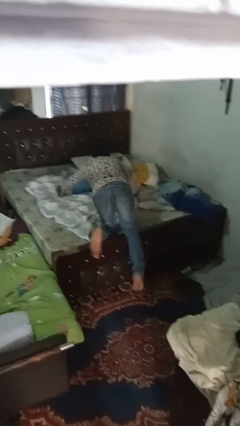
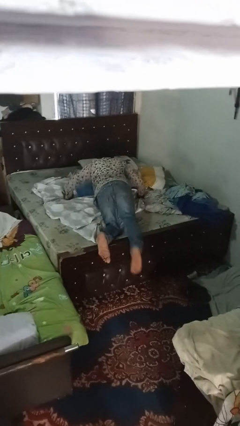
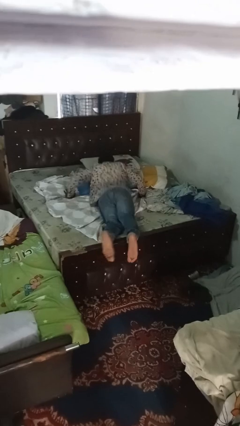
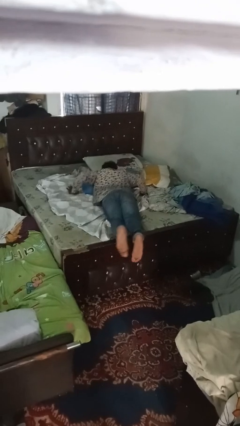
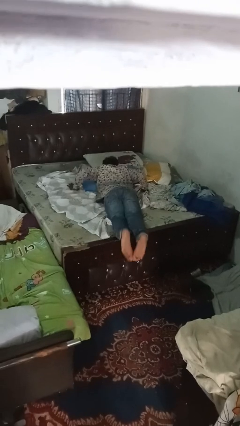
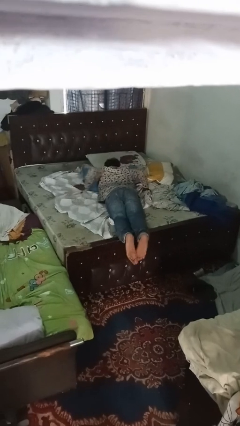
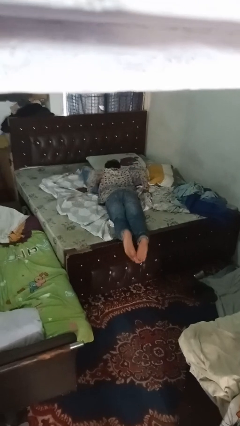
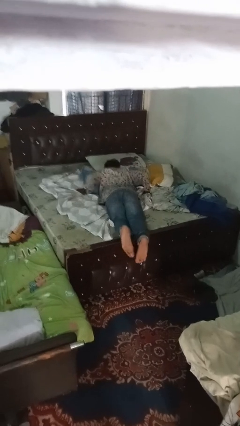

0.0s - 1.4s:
person lies down on bed

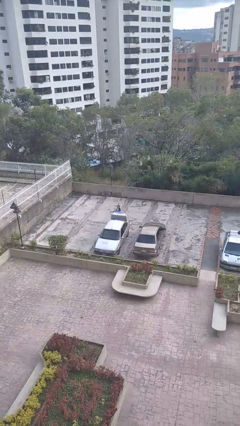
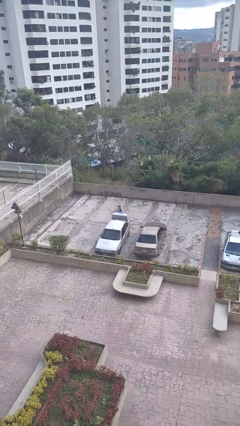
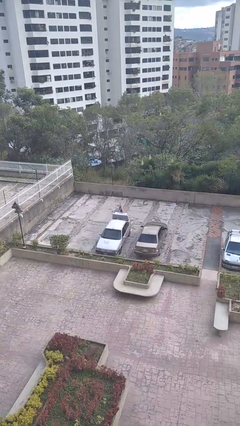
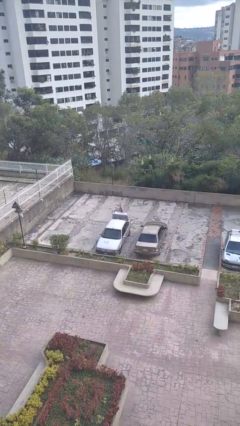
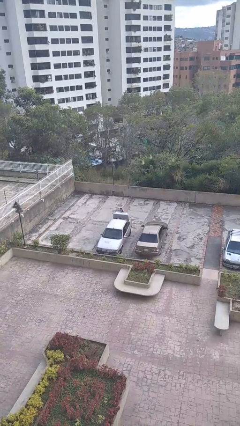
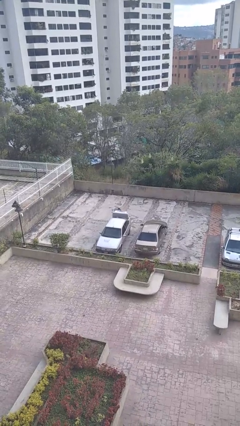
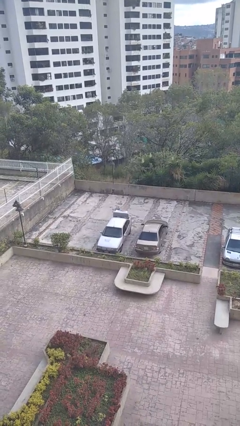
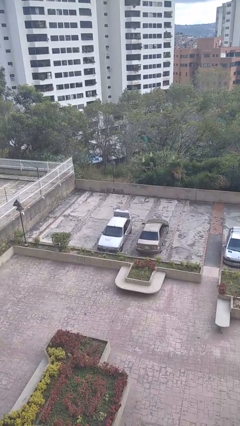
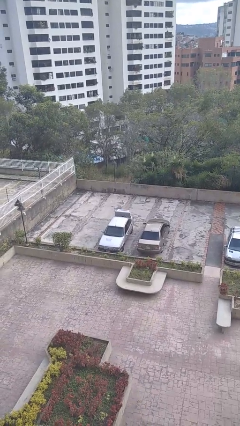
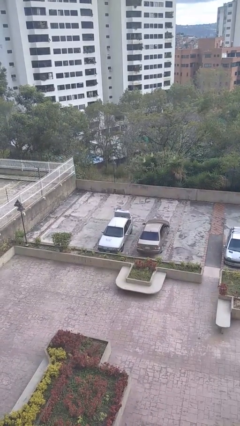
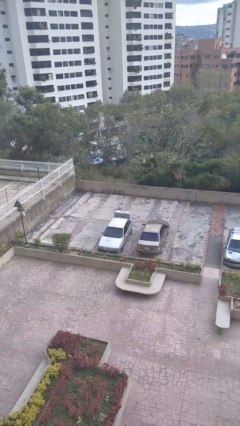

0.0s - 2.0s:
person loads car

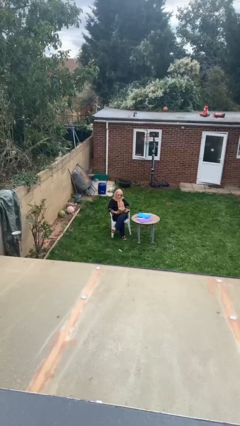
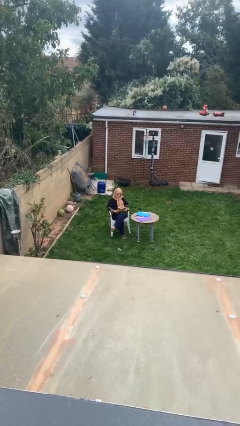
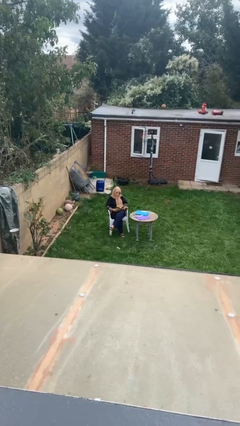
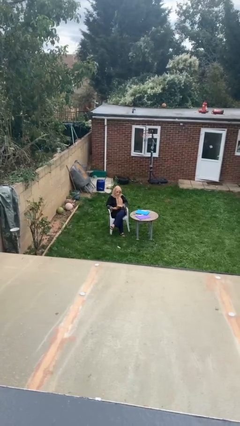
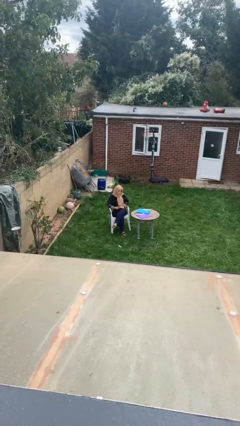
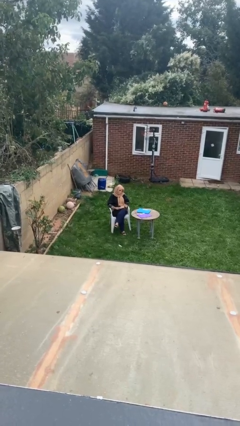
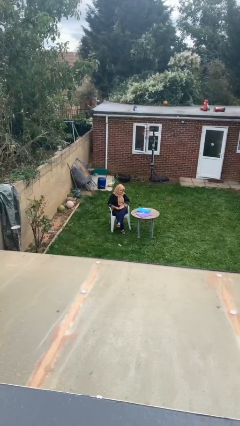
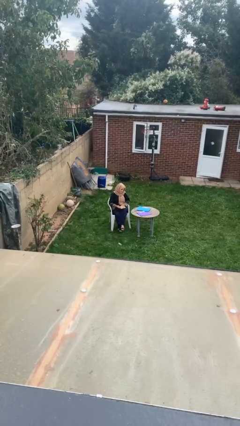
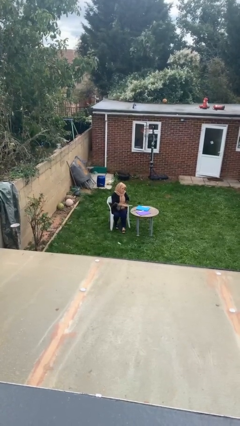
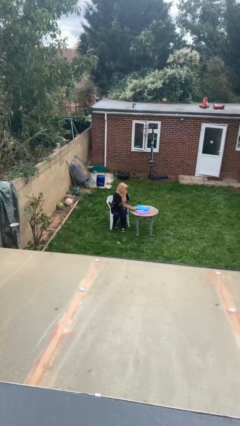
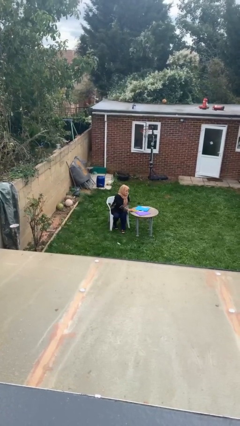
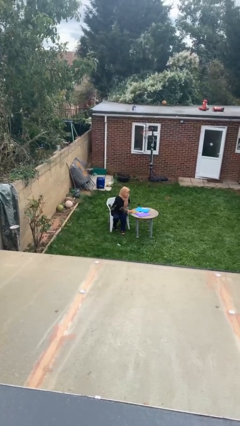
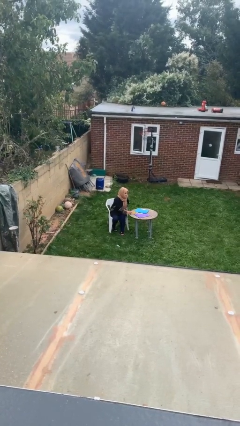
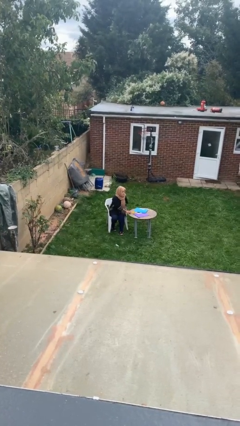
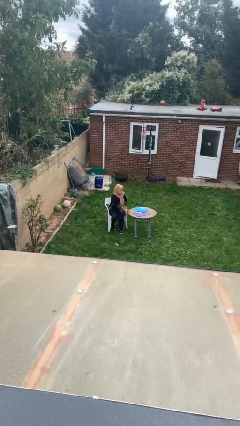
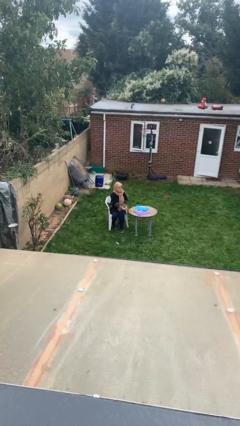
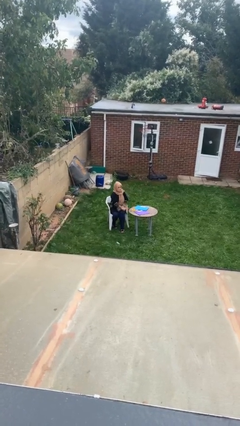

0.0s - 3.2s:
person puts down object on table

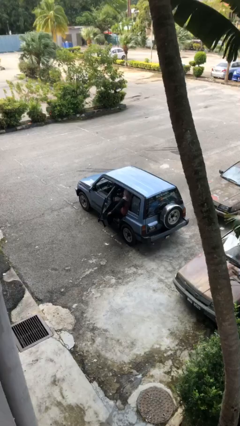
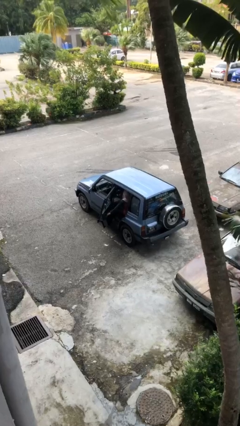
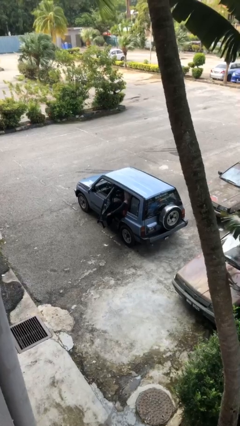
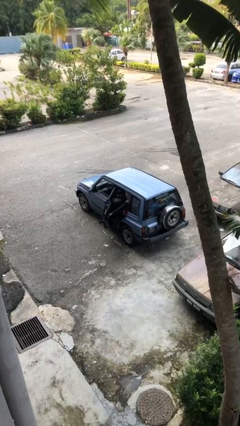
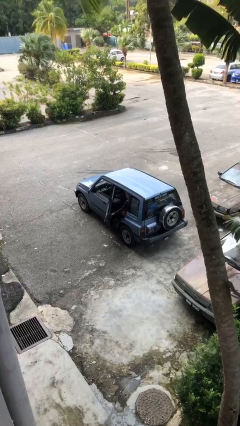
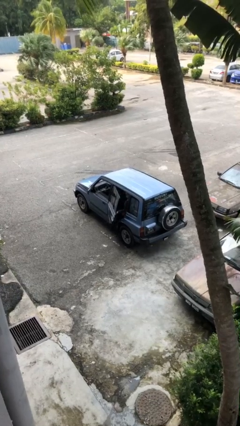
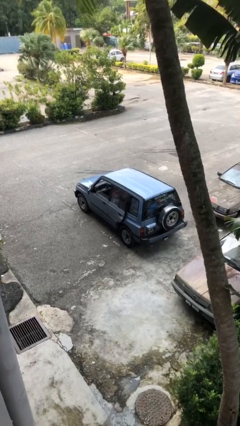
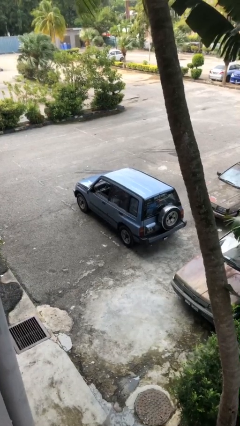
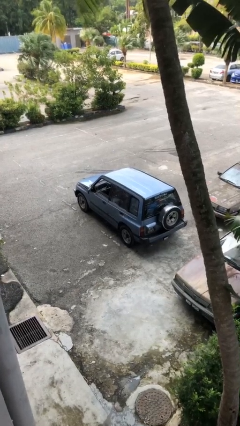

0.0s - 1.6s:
person closes car door

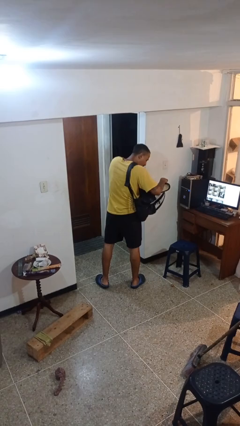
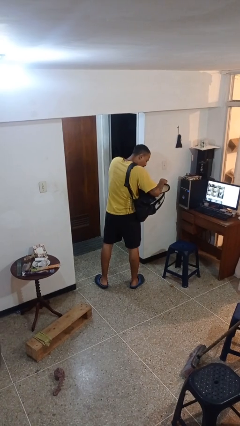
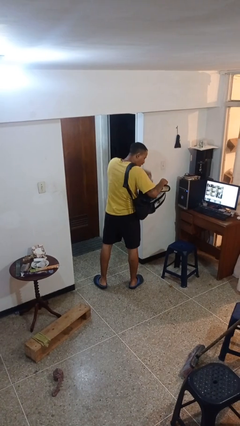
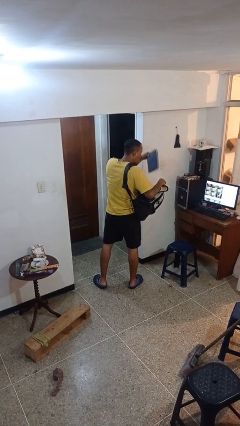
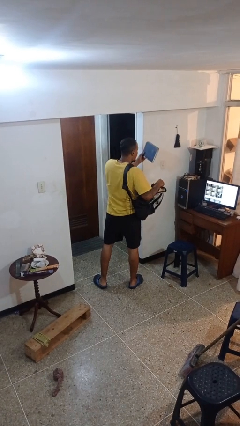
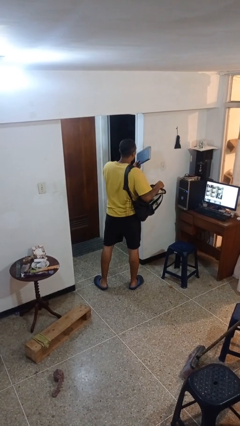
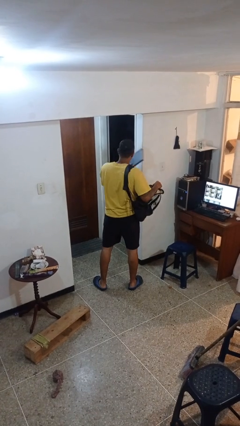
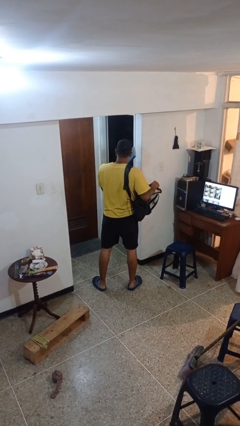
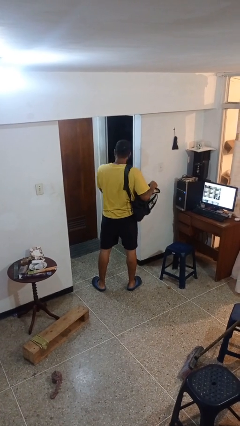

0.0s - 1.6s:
person takes object from backpack

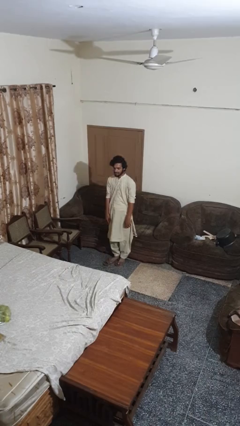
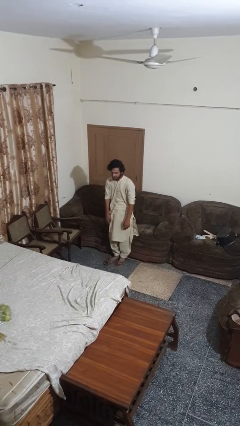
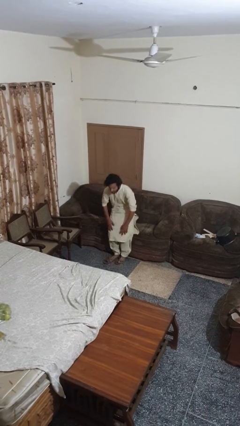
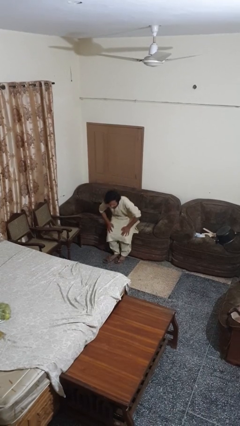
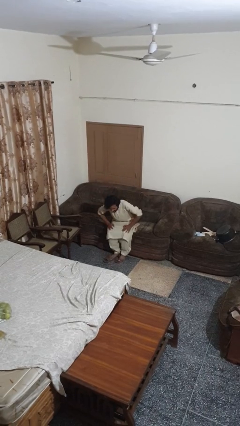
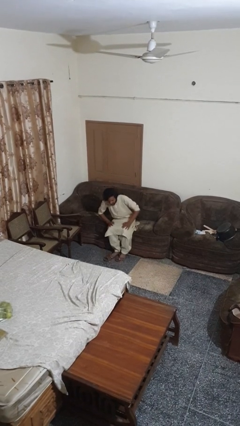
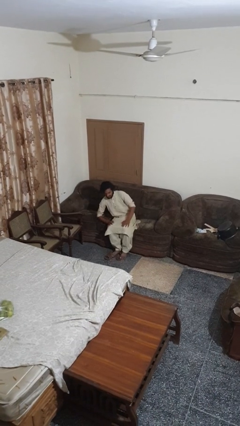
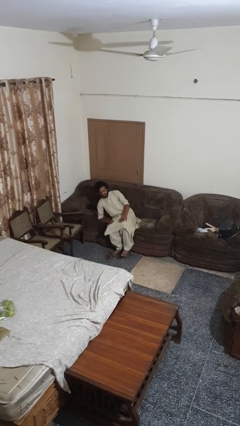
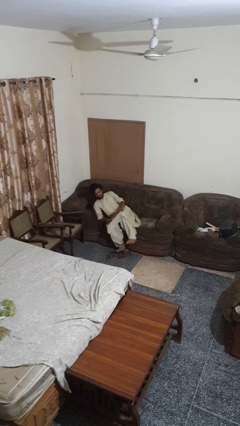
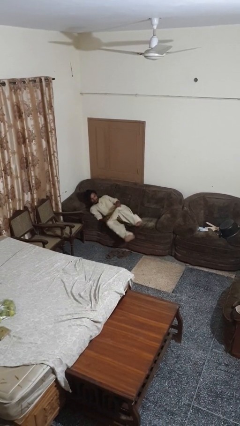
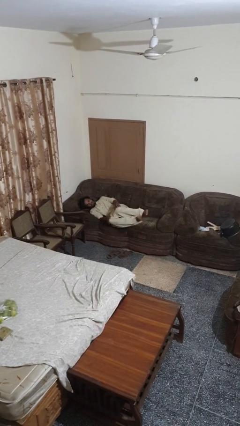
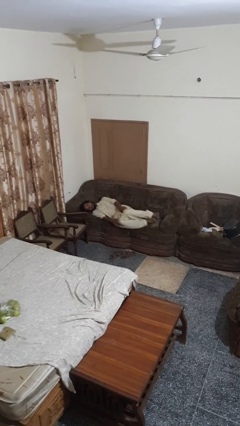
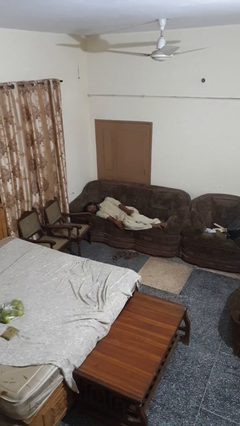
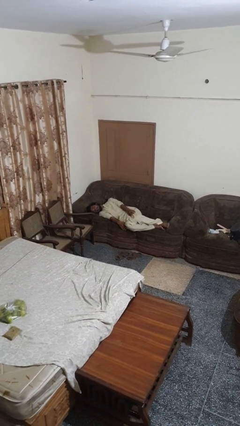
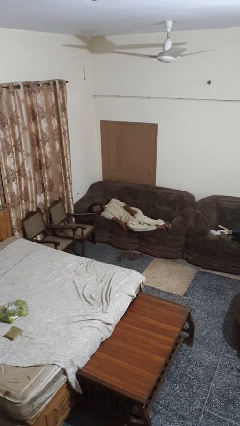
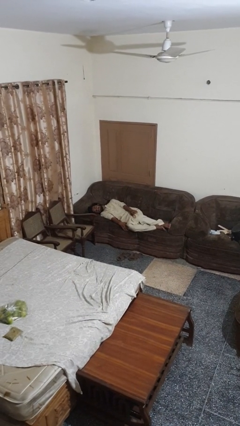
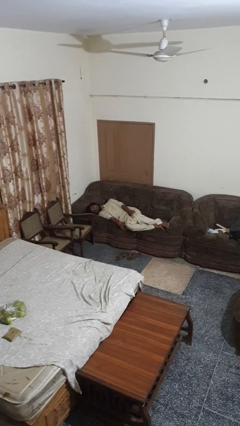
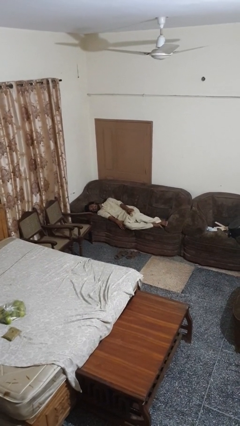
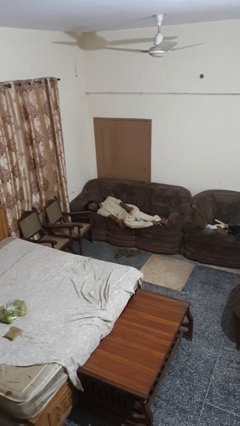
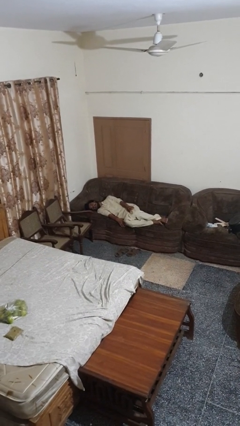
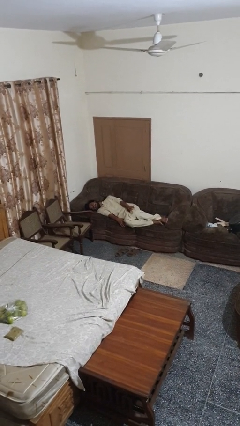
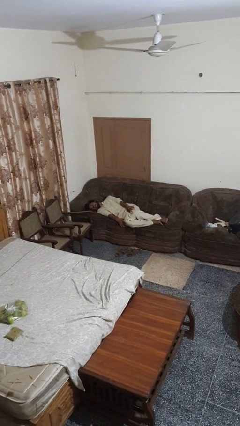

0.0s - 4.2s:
person lies down on couch

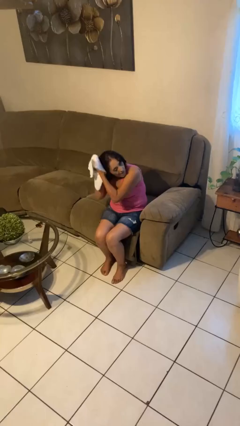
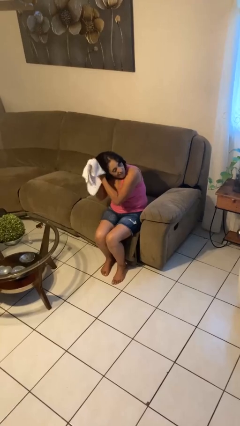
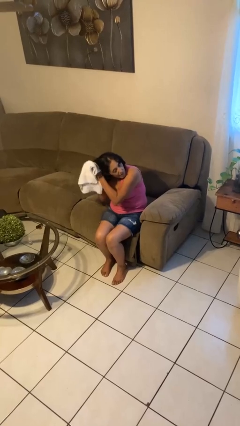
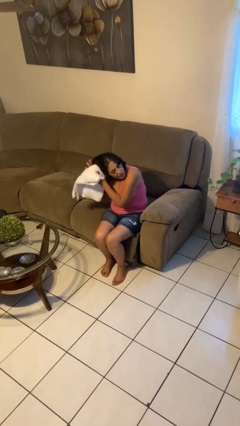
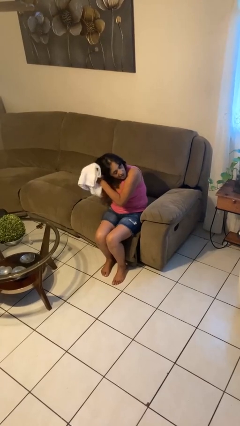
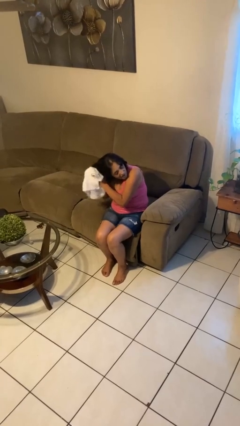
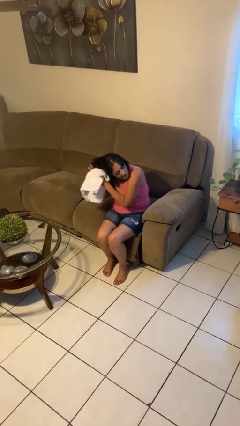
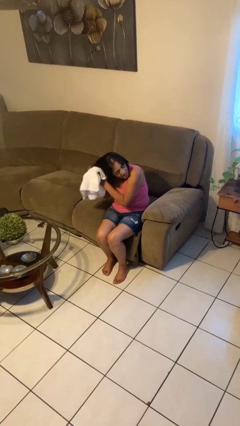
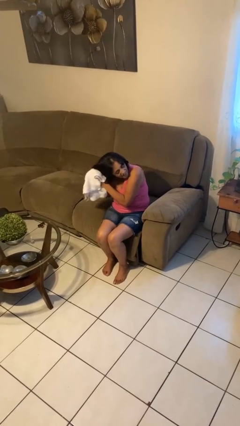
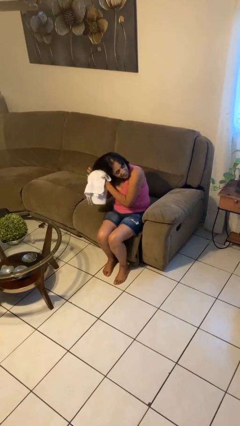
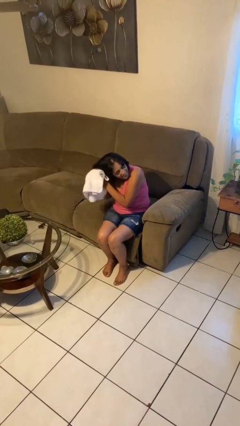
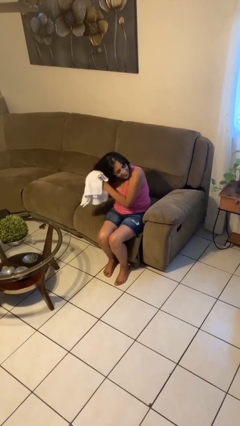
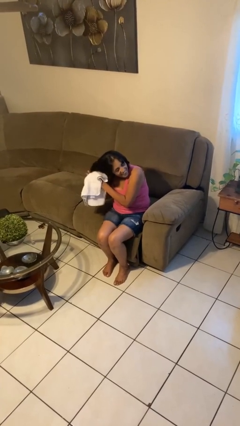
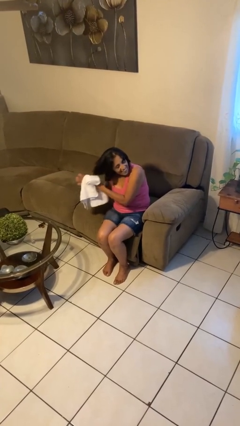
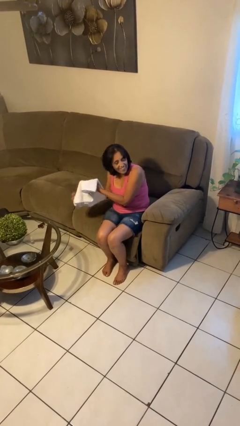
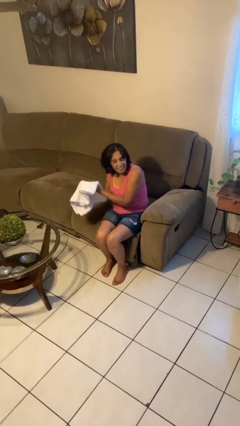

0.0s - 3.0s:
person dries hair with towel
